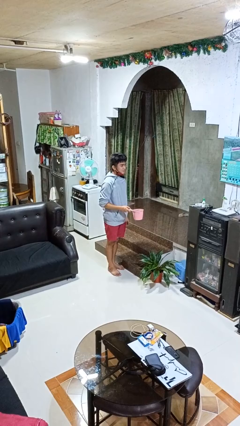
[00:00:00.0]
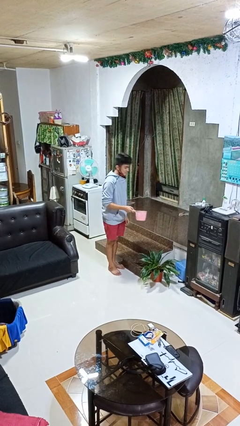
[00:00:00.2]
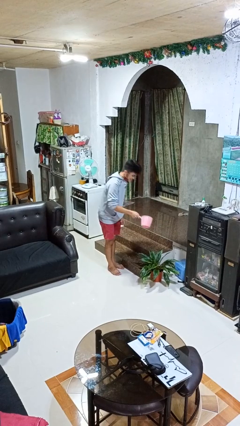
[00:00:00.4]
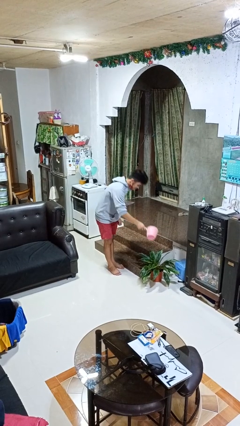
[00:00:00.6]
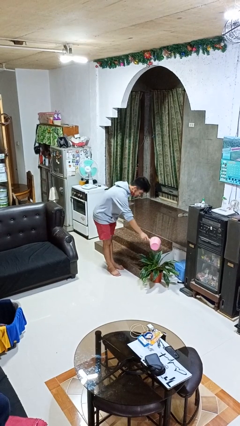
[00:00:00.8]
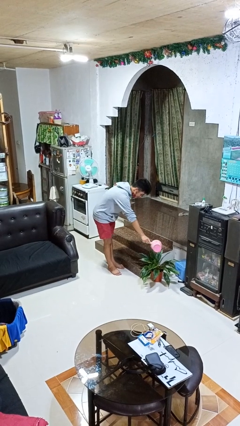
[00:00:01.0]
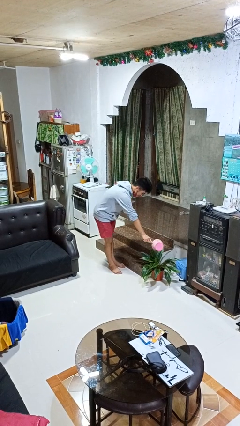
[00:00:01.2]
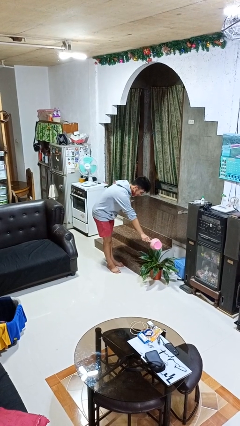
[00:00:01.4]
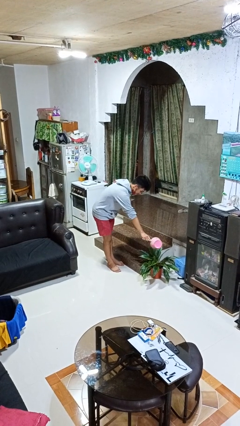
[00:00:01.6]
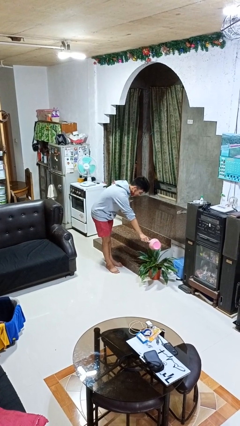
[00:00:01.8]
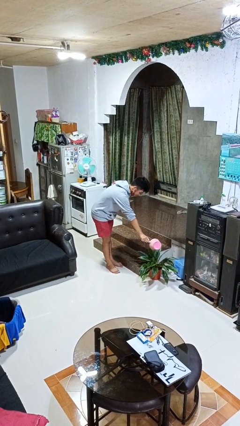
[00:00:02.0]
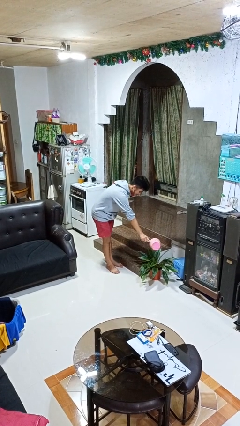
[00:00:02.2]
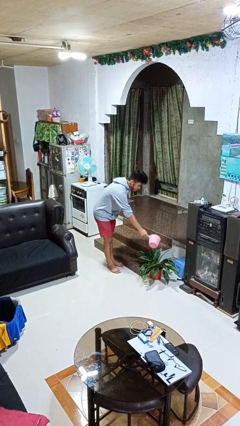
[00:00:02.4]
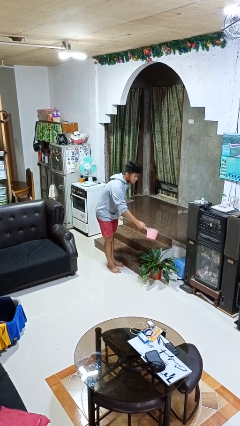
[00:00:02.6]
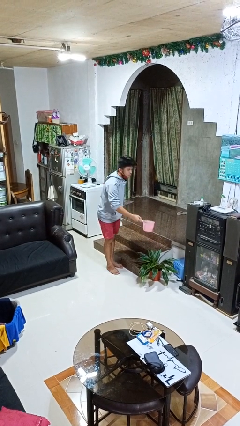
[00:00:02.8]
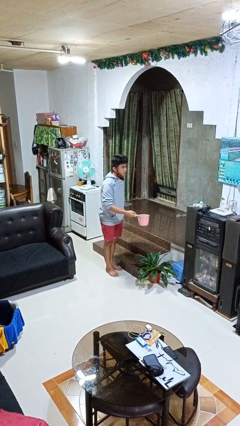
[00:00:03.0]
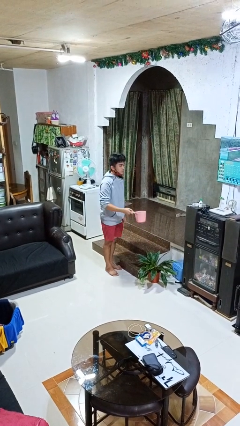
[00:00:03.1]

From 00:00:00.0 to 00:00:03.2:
person waters houseplant

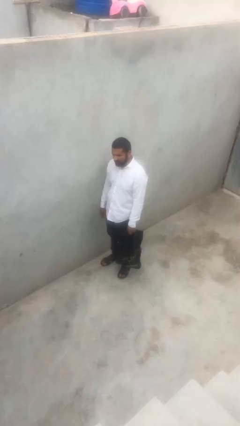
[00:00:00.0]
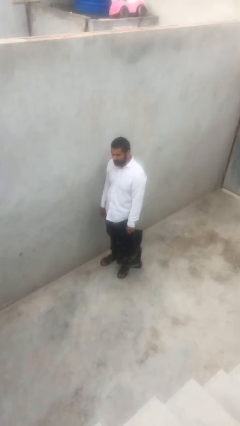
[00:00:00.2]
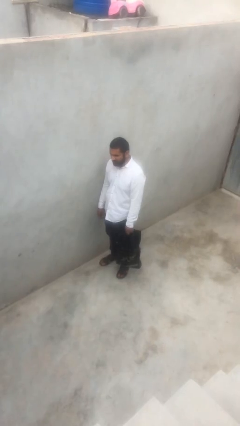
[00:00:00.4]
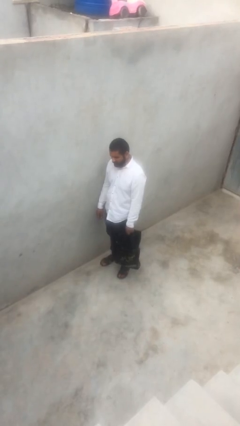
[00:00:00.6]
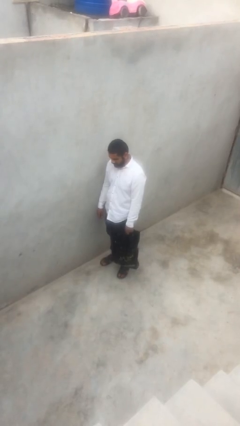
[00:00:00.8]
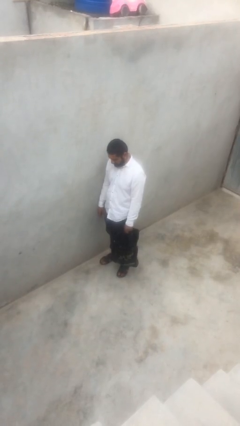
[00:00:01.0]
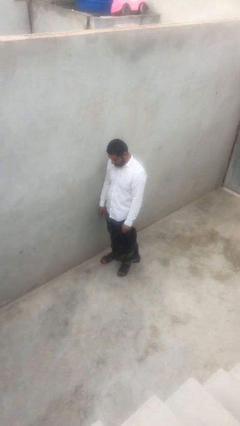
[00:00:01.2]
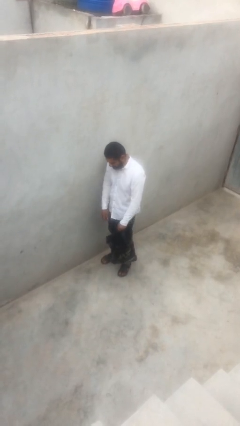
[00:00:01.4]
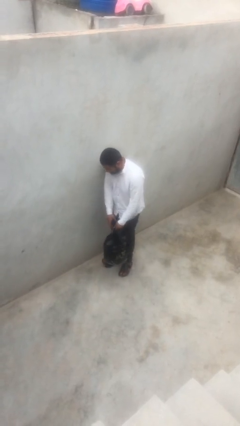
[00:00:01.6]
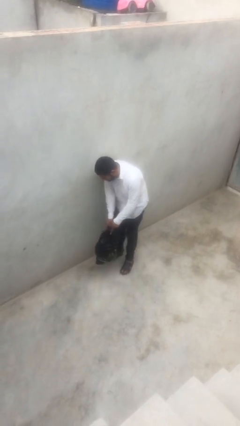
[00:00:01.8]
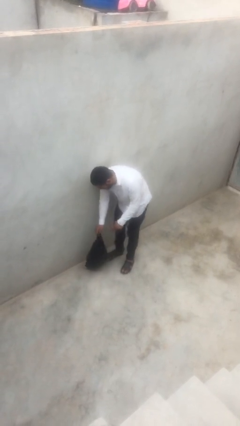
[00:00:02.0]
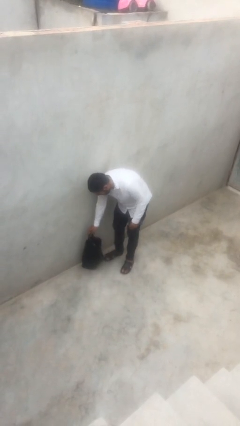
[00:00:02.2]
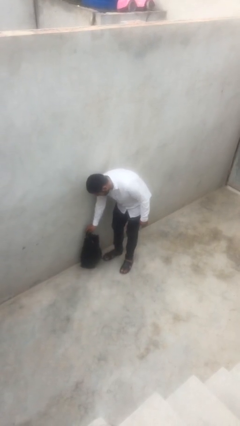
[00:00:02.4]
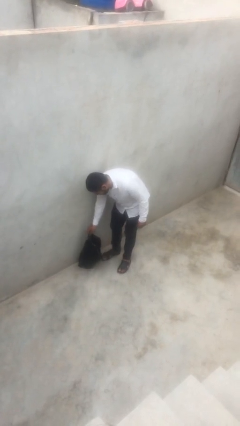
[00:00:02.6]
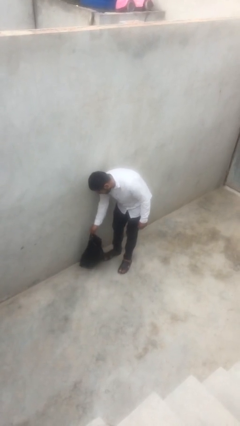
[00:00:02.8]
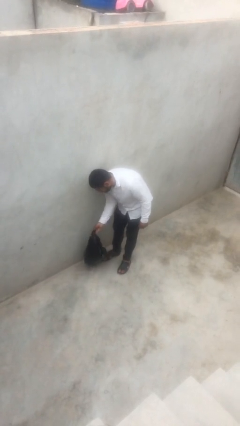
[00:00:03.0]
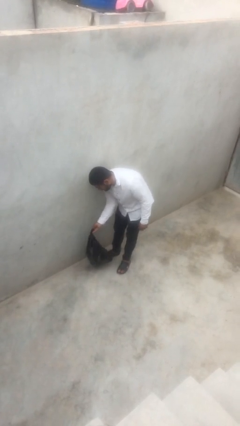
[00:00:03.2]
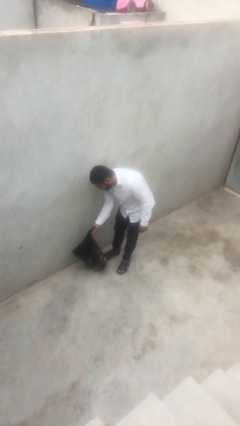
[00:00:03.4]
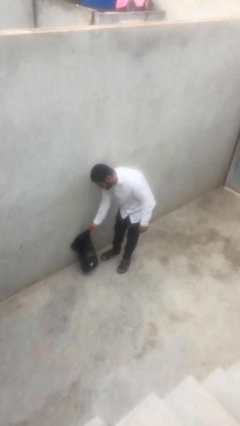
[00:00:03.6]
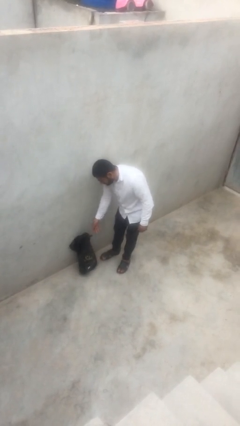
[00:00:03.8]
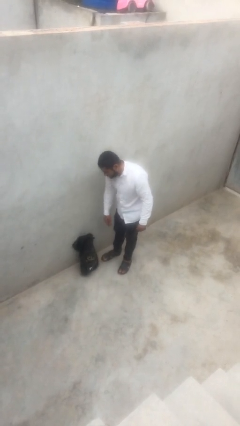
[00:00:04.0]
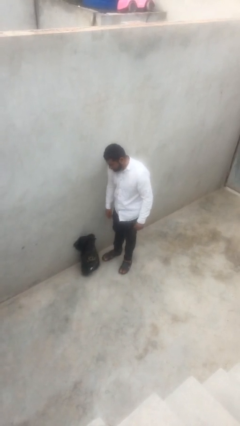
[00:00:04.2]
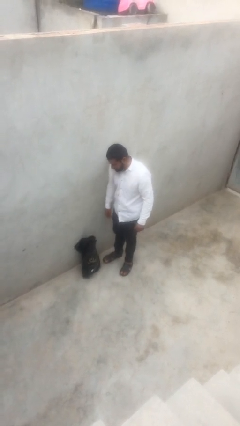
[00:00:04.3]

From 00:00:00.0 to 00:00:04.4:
person puts down object on floor

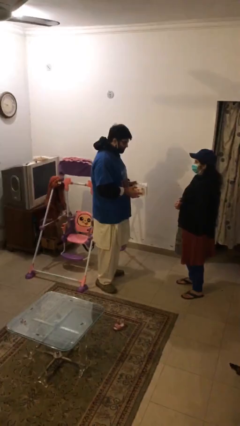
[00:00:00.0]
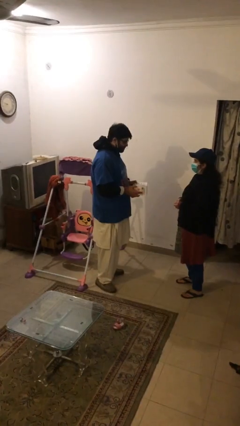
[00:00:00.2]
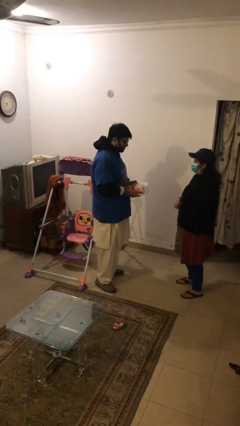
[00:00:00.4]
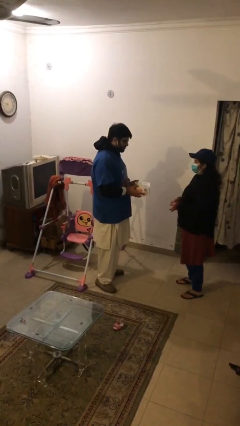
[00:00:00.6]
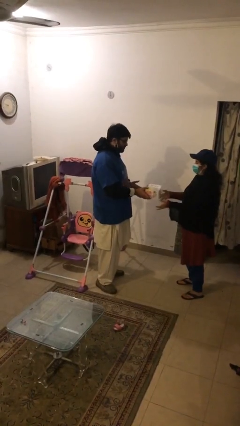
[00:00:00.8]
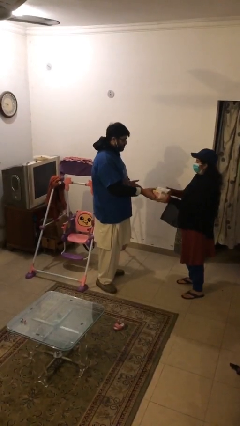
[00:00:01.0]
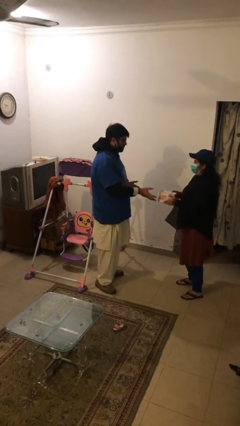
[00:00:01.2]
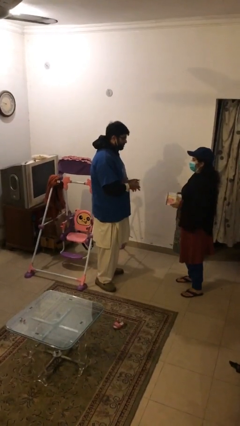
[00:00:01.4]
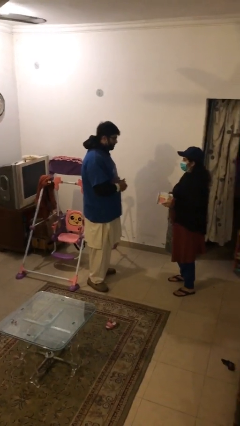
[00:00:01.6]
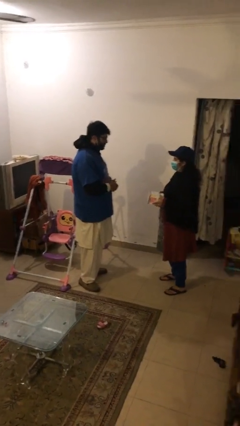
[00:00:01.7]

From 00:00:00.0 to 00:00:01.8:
person transfers object to person

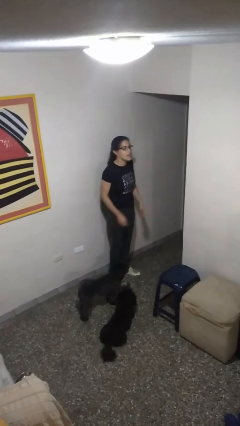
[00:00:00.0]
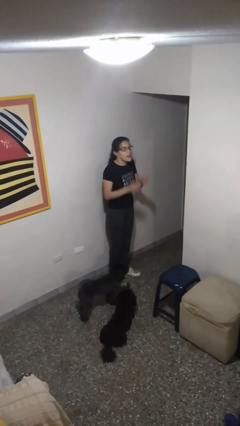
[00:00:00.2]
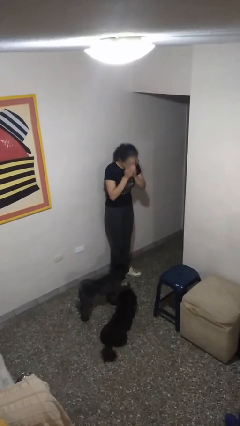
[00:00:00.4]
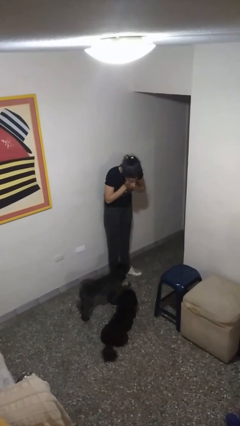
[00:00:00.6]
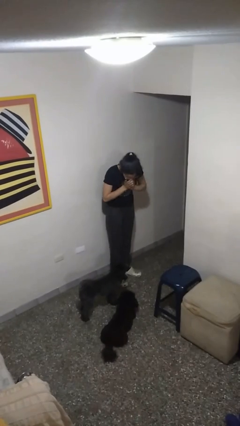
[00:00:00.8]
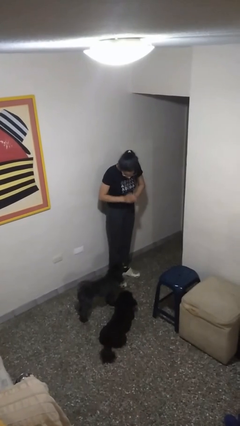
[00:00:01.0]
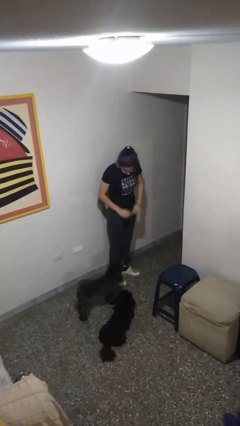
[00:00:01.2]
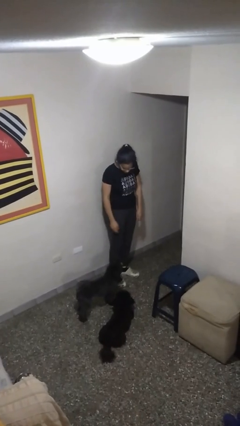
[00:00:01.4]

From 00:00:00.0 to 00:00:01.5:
person sneezes into hand

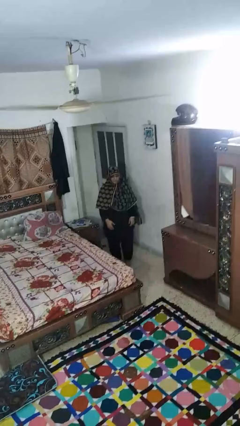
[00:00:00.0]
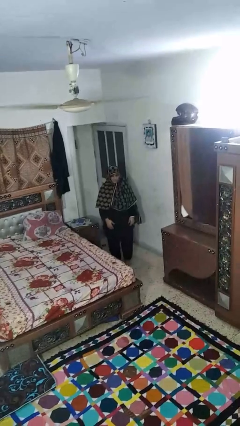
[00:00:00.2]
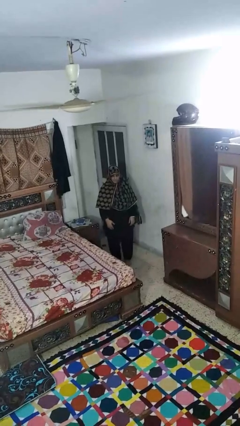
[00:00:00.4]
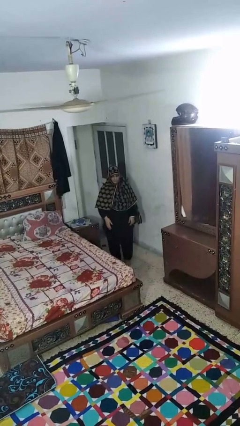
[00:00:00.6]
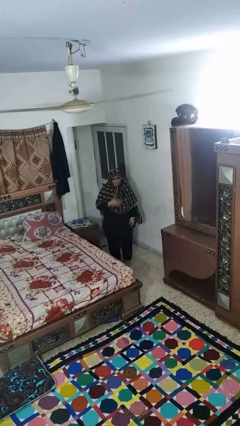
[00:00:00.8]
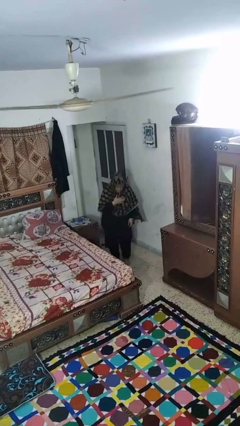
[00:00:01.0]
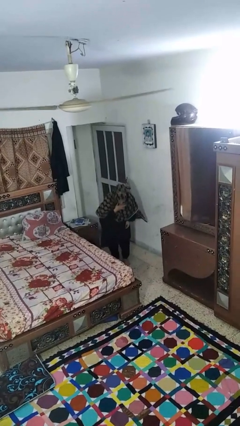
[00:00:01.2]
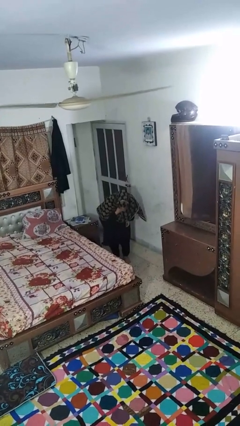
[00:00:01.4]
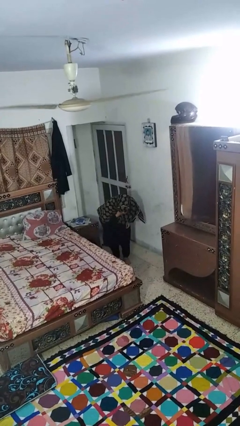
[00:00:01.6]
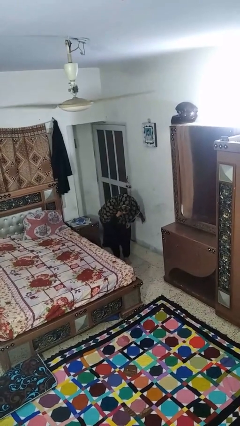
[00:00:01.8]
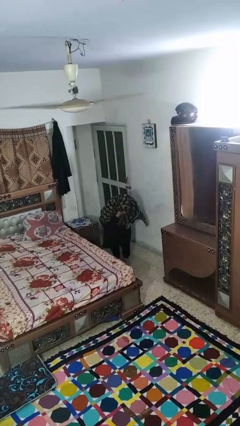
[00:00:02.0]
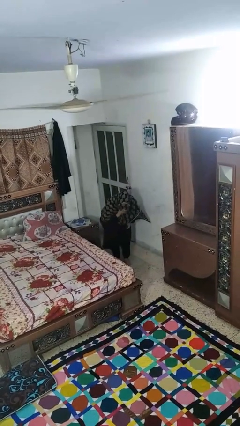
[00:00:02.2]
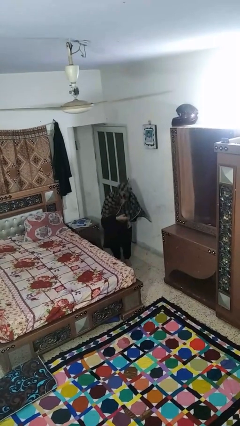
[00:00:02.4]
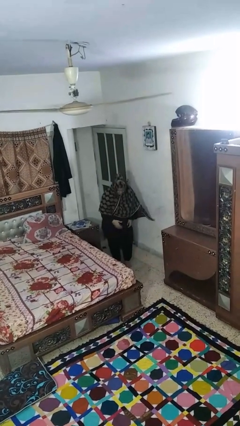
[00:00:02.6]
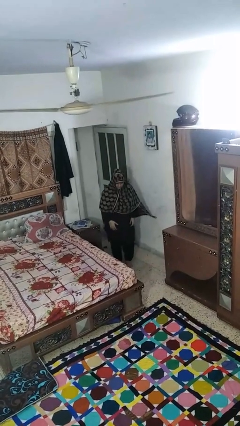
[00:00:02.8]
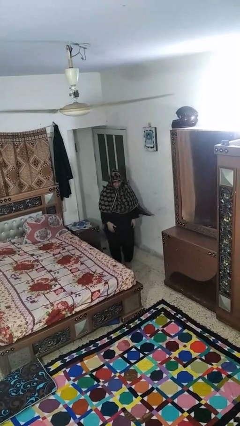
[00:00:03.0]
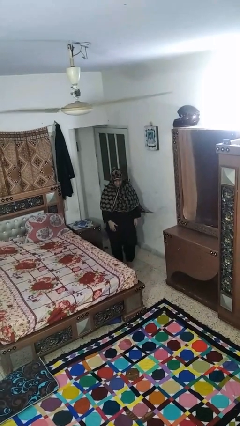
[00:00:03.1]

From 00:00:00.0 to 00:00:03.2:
person bows

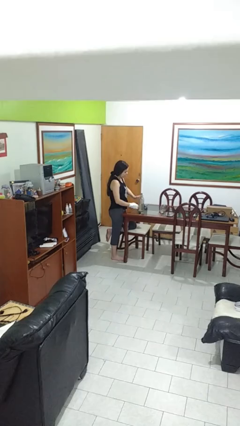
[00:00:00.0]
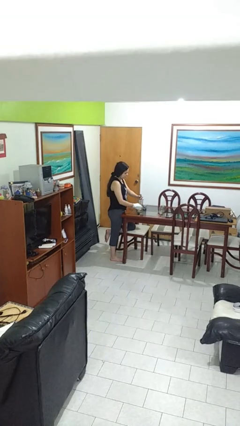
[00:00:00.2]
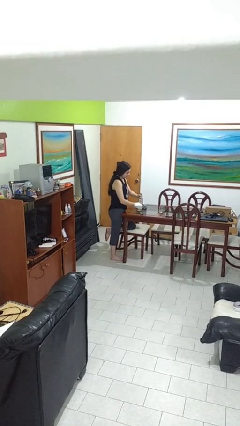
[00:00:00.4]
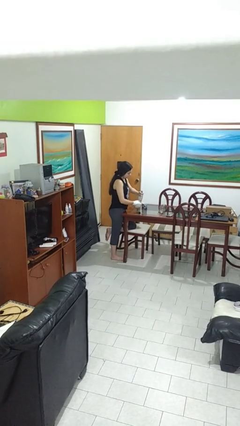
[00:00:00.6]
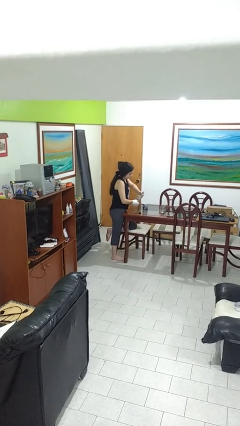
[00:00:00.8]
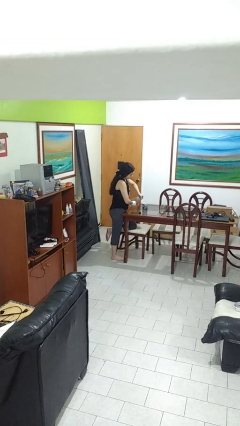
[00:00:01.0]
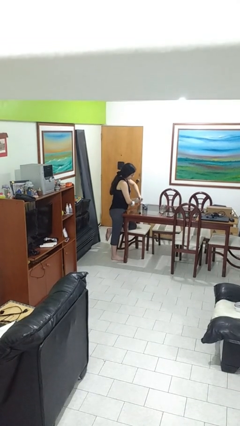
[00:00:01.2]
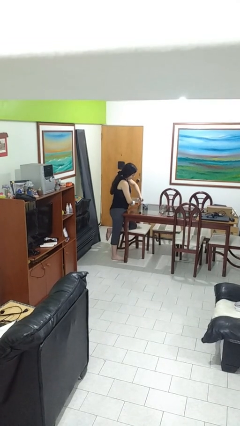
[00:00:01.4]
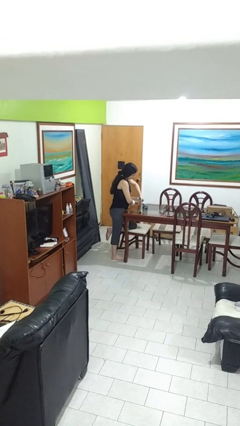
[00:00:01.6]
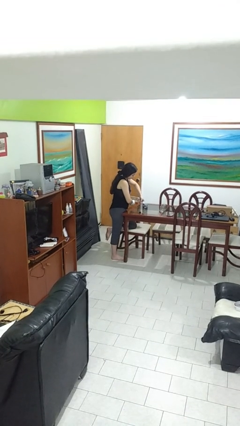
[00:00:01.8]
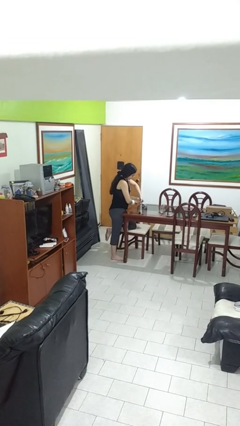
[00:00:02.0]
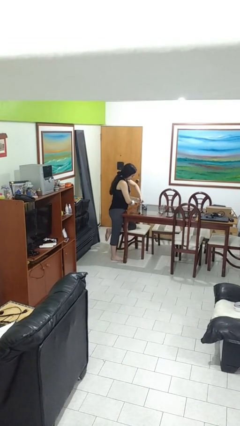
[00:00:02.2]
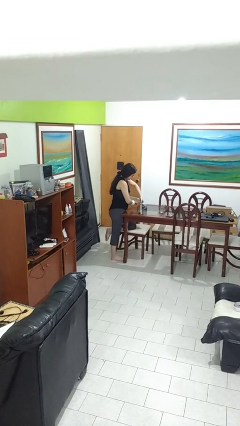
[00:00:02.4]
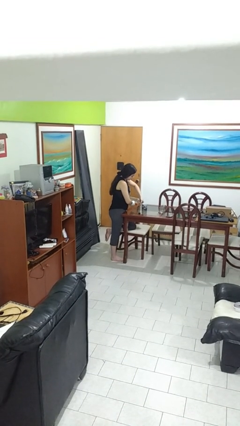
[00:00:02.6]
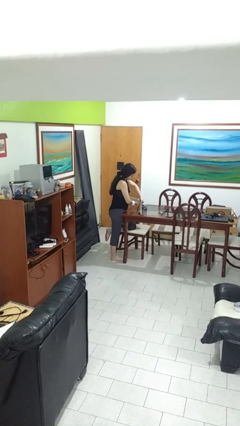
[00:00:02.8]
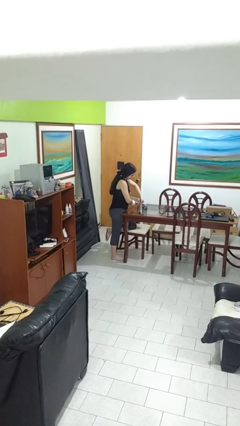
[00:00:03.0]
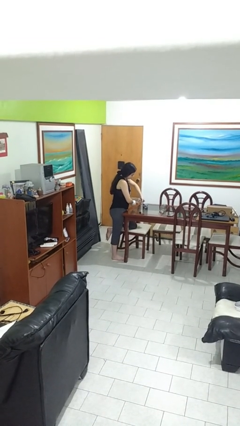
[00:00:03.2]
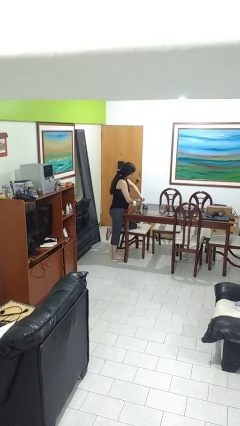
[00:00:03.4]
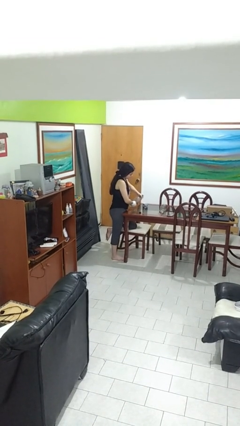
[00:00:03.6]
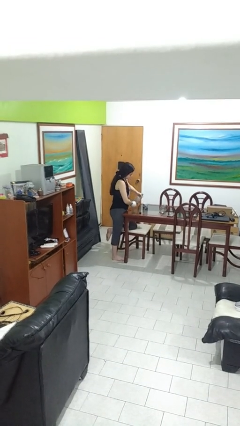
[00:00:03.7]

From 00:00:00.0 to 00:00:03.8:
person pours liquid into cup
